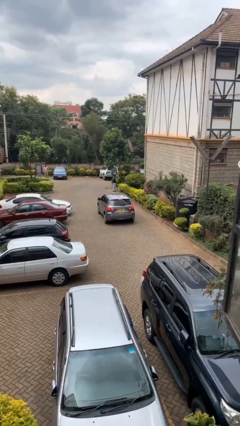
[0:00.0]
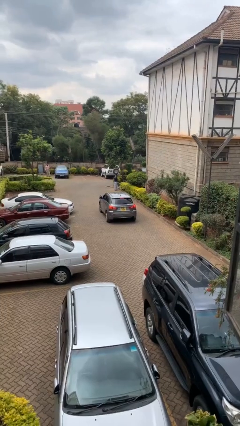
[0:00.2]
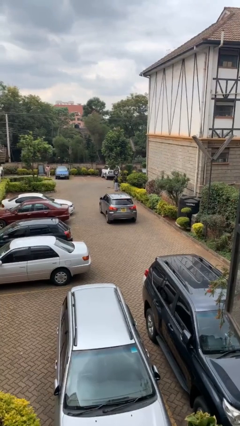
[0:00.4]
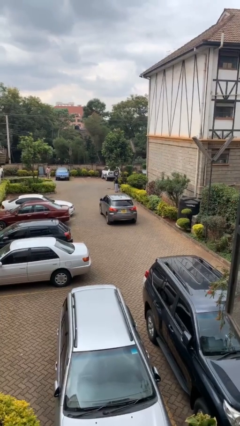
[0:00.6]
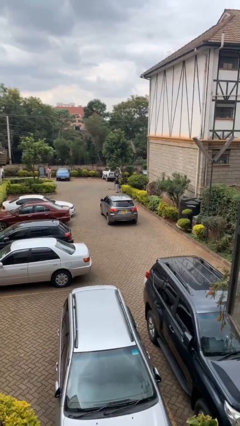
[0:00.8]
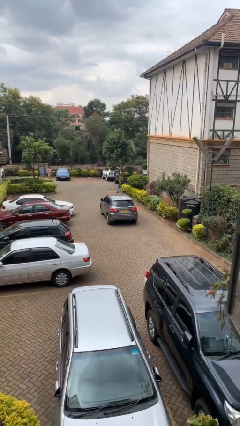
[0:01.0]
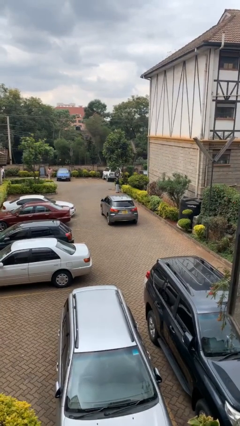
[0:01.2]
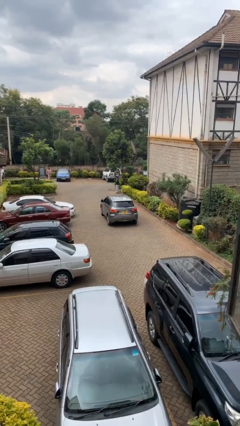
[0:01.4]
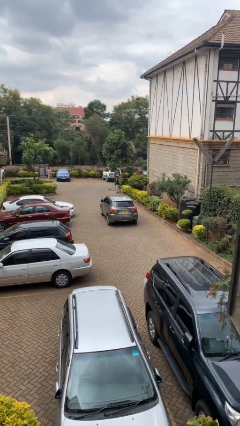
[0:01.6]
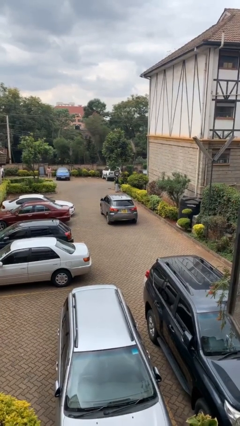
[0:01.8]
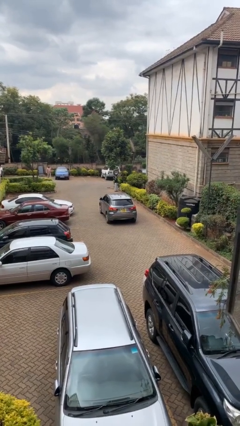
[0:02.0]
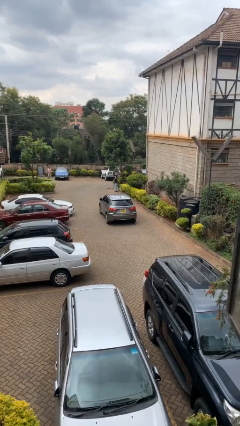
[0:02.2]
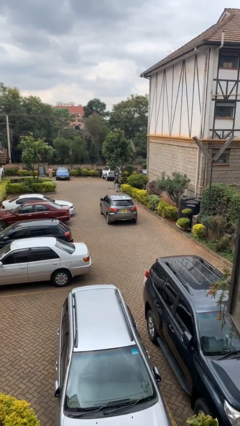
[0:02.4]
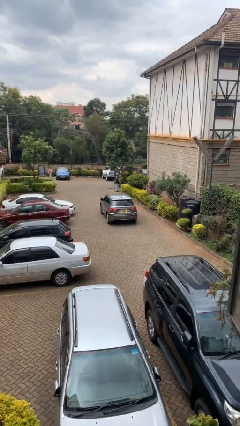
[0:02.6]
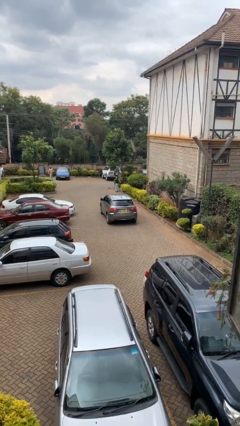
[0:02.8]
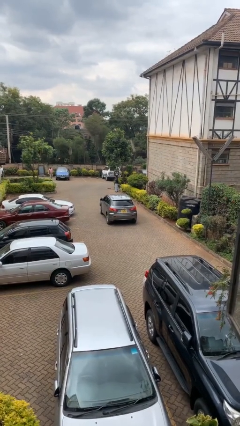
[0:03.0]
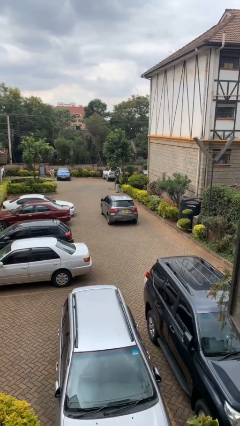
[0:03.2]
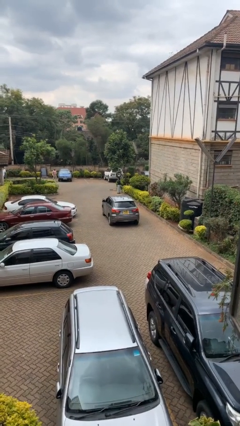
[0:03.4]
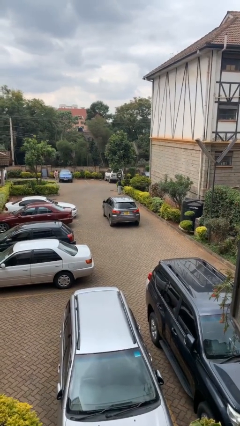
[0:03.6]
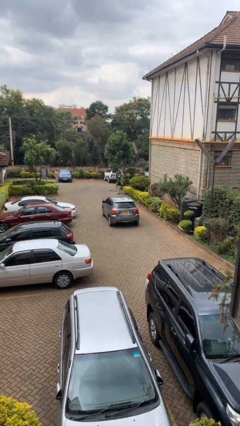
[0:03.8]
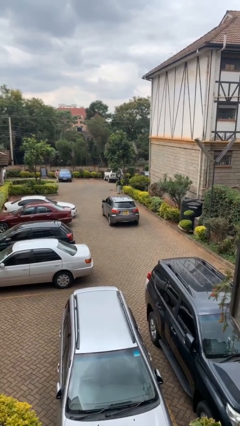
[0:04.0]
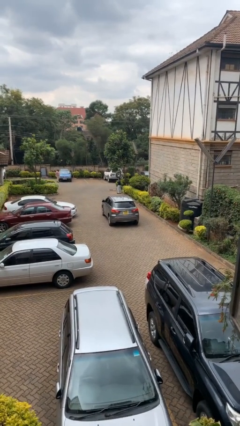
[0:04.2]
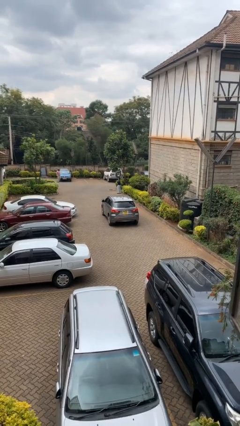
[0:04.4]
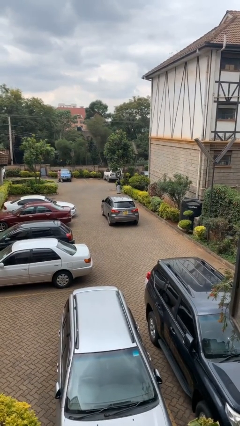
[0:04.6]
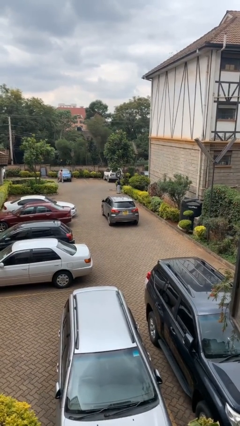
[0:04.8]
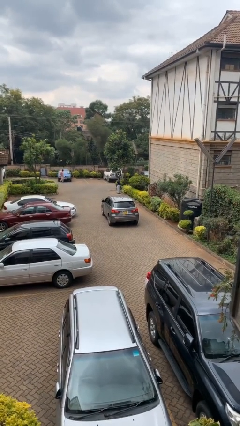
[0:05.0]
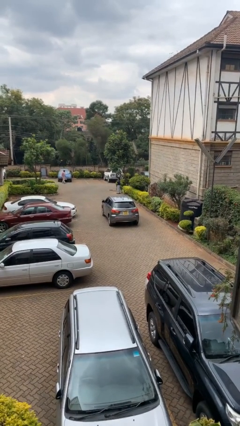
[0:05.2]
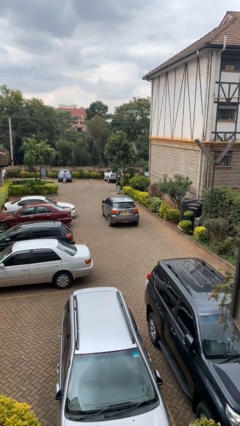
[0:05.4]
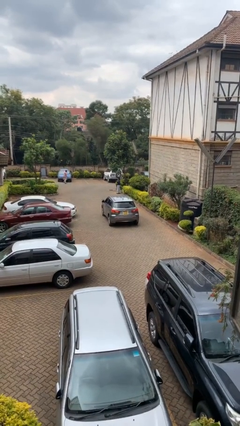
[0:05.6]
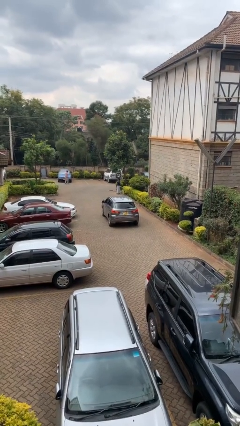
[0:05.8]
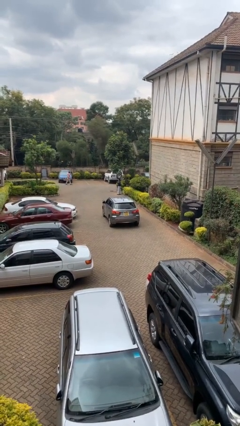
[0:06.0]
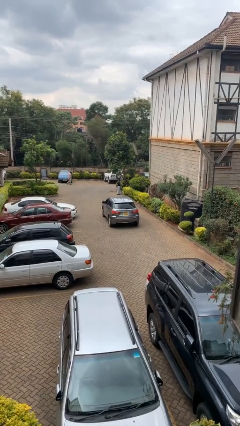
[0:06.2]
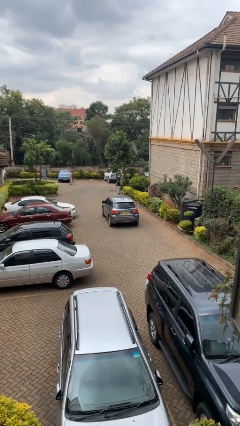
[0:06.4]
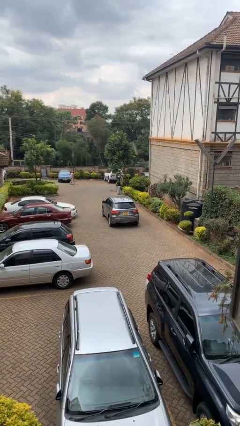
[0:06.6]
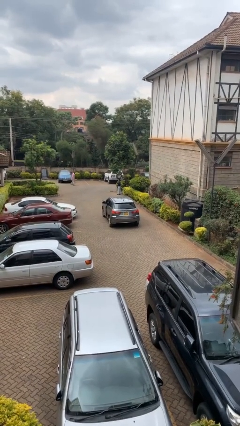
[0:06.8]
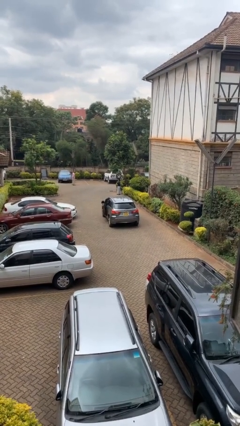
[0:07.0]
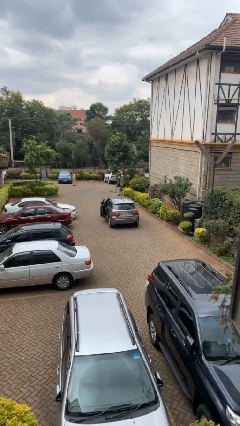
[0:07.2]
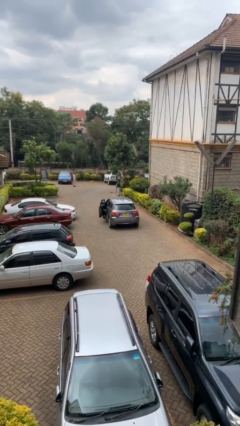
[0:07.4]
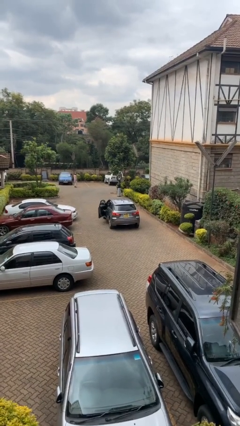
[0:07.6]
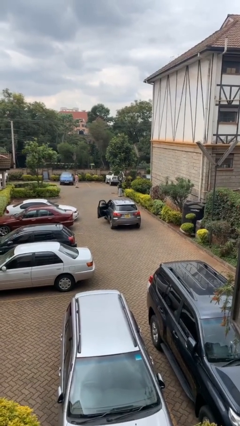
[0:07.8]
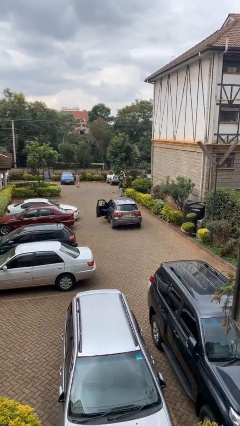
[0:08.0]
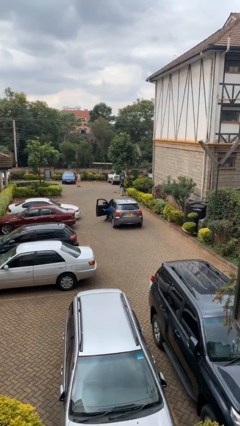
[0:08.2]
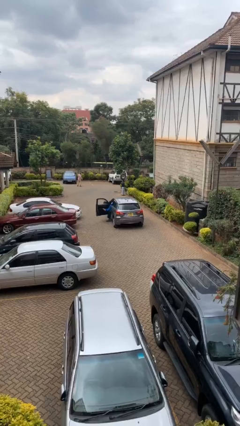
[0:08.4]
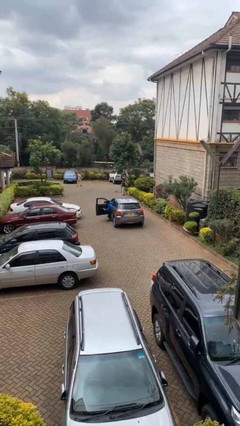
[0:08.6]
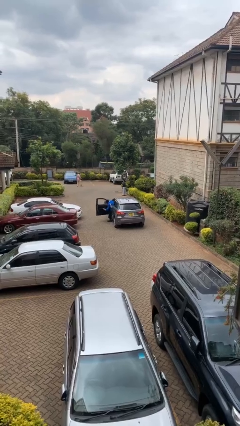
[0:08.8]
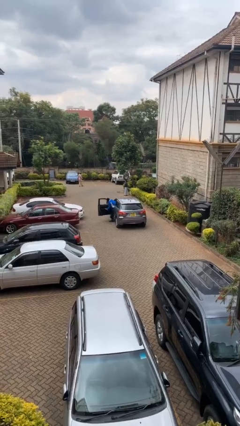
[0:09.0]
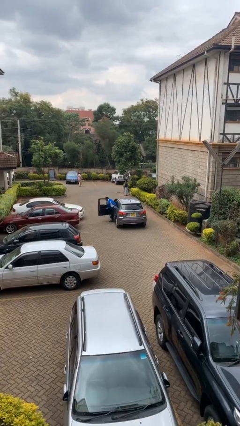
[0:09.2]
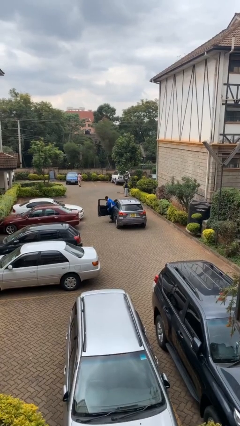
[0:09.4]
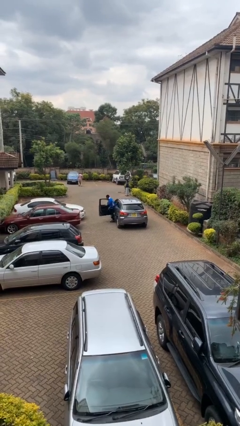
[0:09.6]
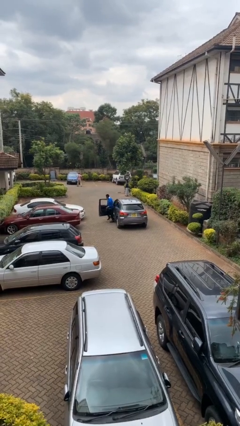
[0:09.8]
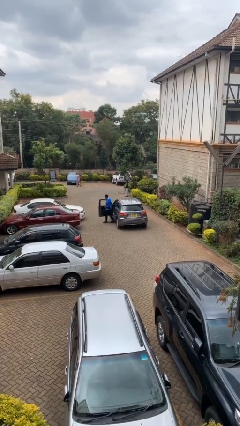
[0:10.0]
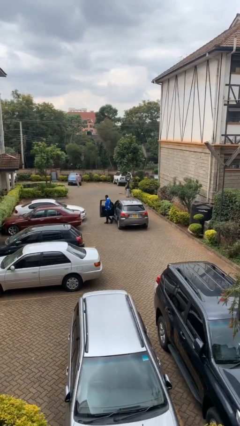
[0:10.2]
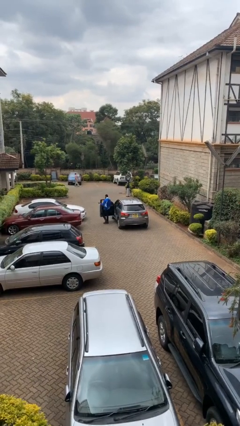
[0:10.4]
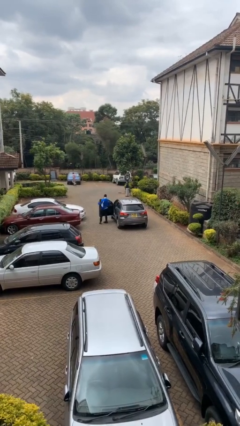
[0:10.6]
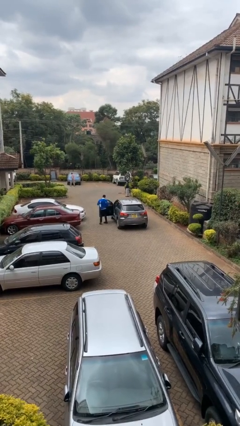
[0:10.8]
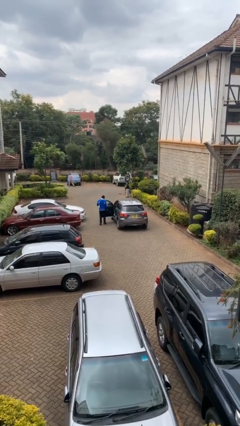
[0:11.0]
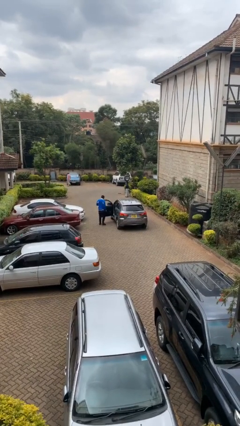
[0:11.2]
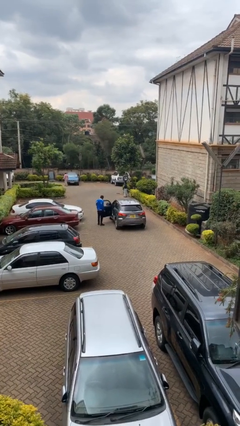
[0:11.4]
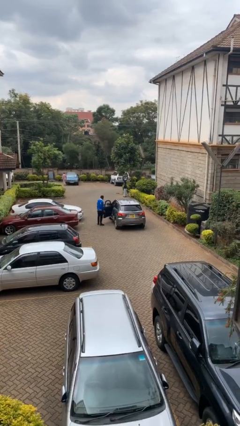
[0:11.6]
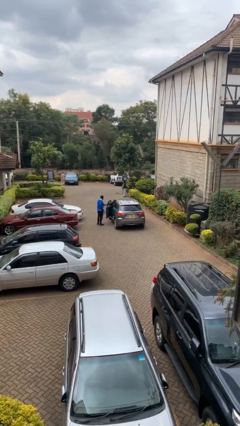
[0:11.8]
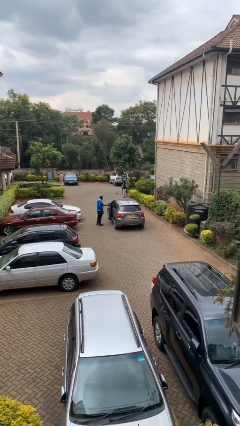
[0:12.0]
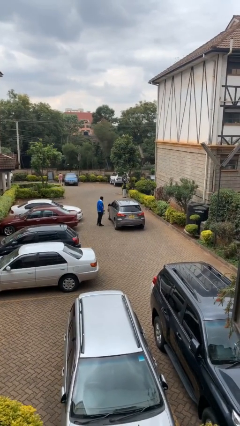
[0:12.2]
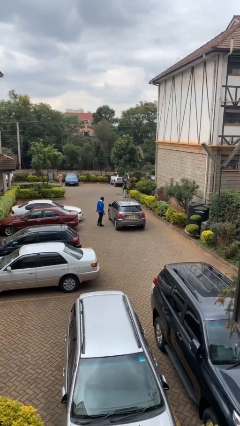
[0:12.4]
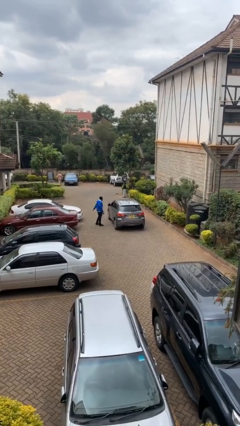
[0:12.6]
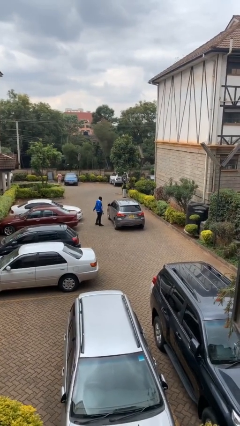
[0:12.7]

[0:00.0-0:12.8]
car drops off person

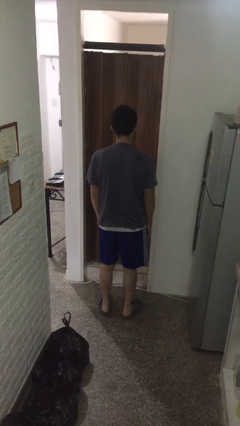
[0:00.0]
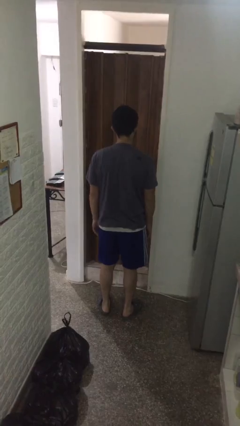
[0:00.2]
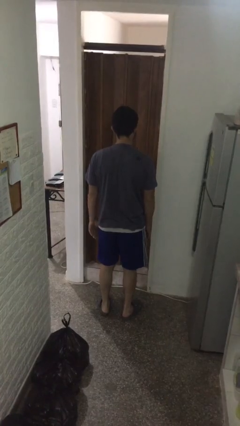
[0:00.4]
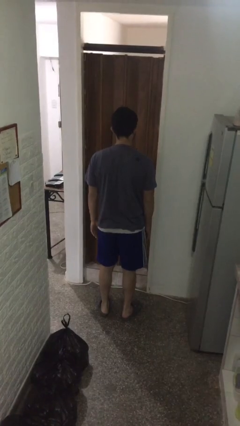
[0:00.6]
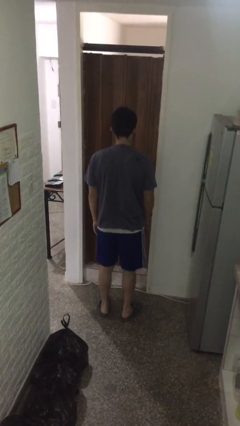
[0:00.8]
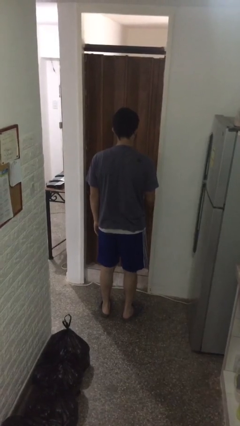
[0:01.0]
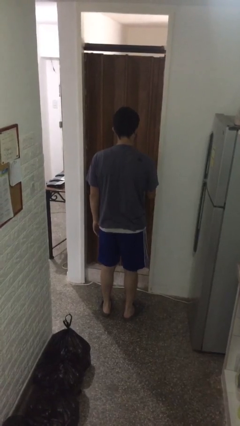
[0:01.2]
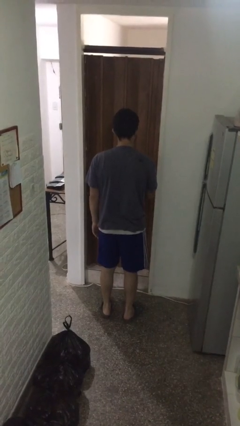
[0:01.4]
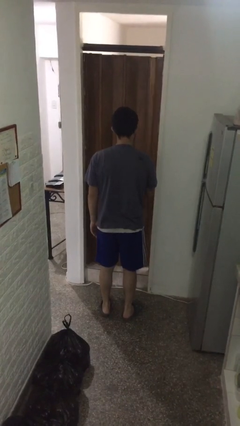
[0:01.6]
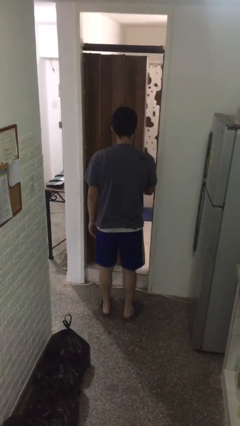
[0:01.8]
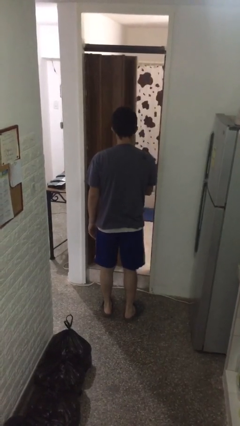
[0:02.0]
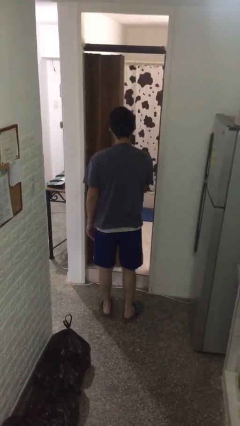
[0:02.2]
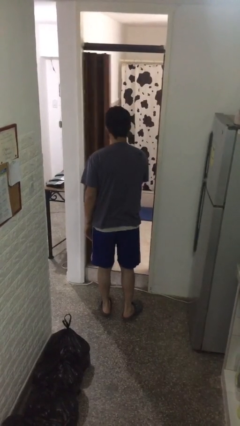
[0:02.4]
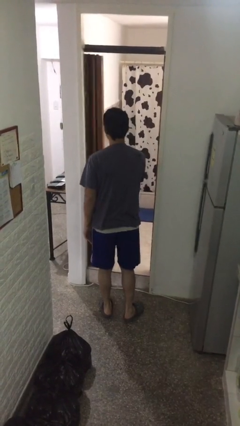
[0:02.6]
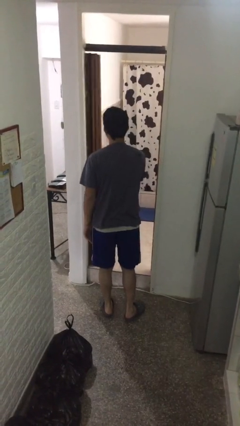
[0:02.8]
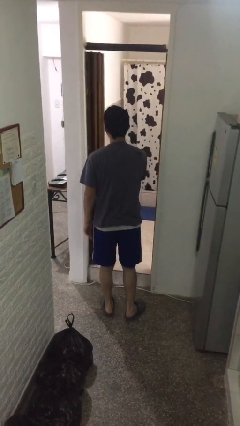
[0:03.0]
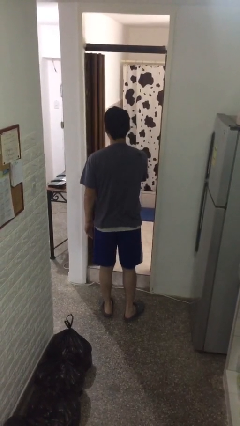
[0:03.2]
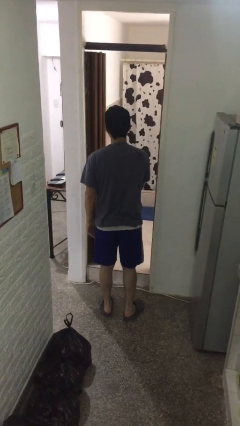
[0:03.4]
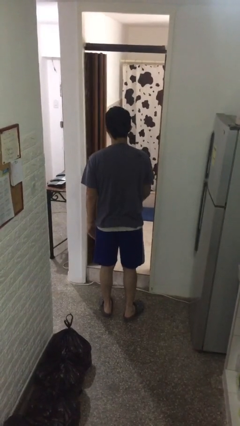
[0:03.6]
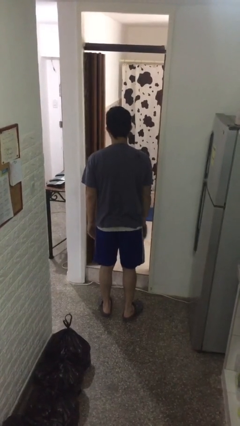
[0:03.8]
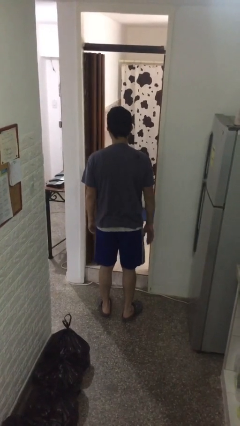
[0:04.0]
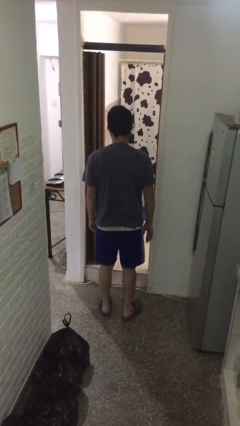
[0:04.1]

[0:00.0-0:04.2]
person opens sliding door

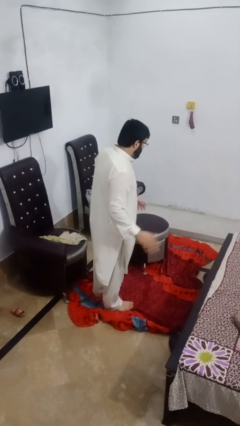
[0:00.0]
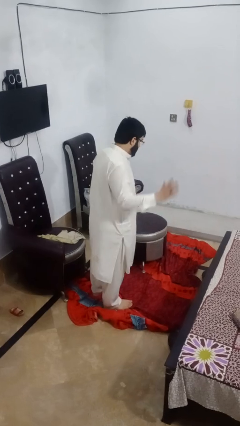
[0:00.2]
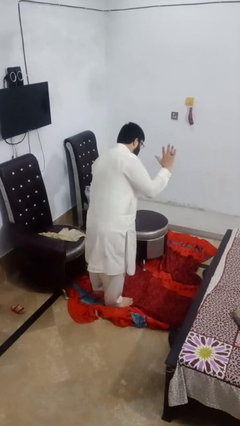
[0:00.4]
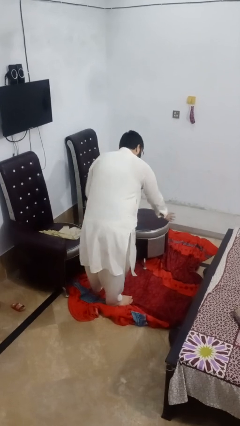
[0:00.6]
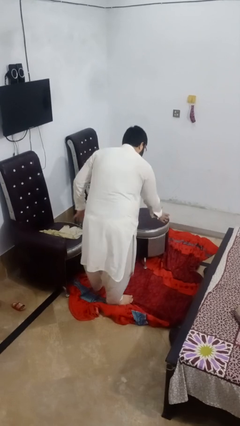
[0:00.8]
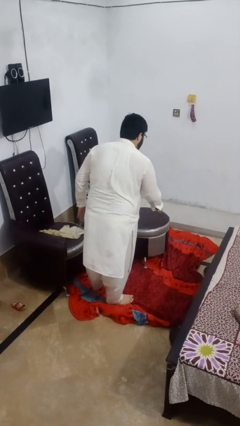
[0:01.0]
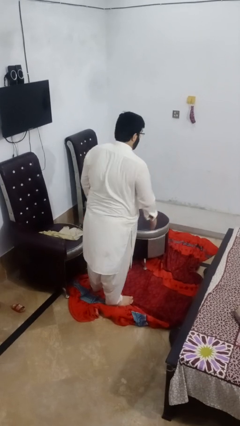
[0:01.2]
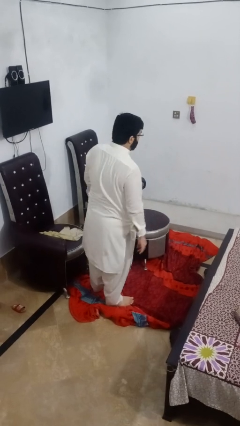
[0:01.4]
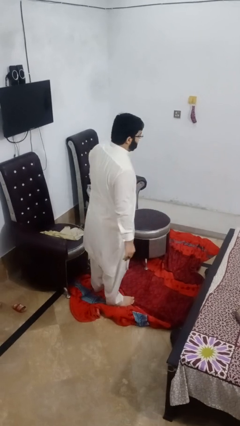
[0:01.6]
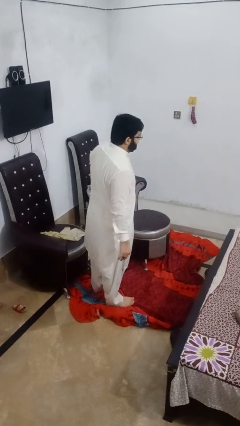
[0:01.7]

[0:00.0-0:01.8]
person karate chop
